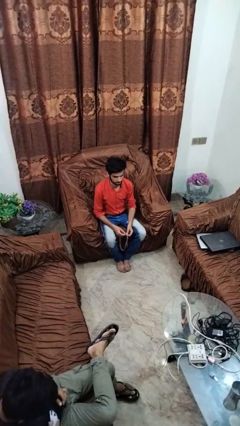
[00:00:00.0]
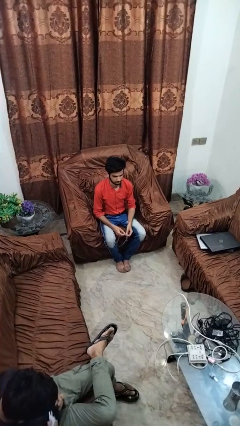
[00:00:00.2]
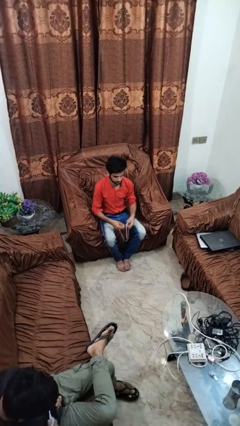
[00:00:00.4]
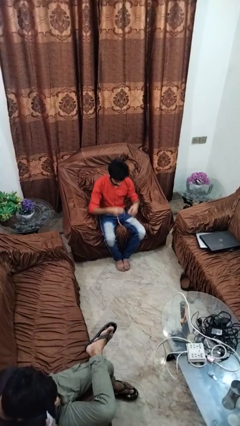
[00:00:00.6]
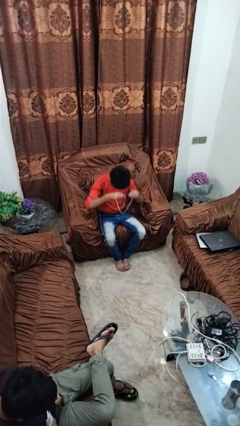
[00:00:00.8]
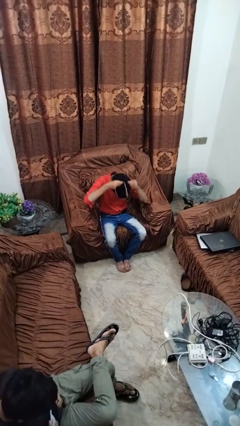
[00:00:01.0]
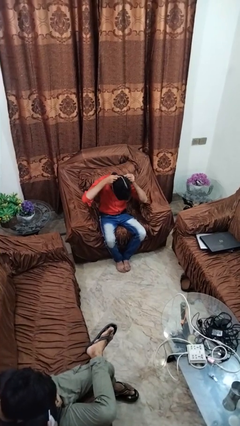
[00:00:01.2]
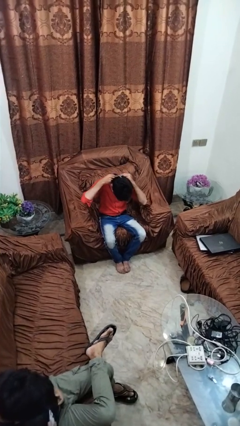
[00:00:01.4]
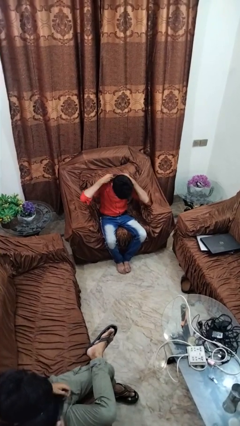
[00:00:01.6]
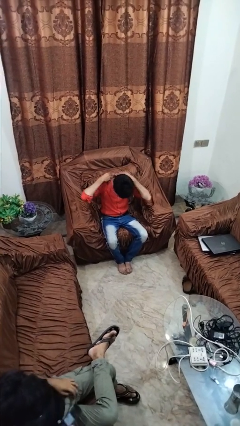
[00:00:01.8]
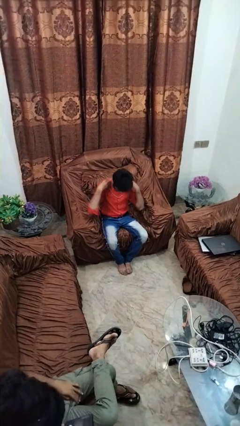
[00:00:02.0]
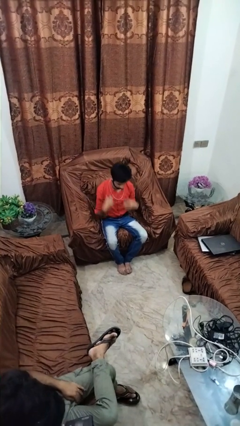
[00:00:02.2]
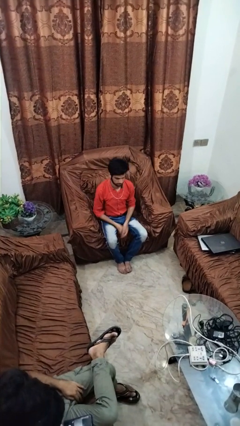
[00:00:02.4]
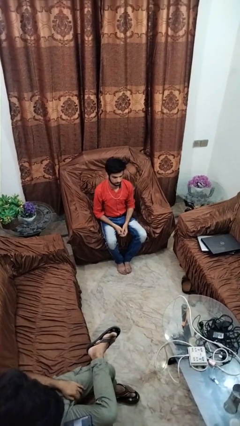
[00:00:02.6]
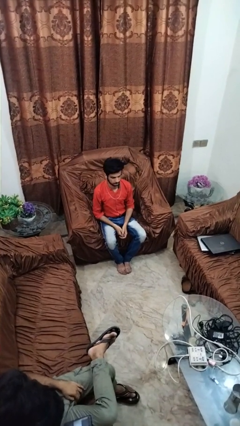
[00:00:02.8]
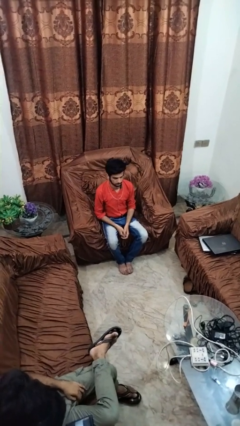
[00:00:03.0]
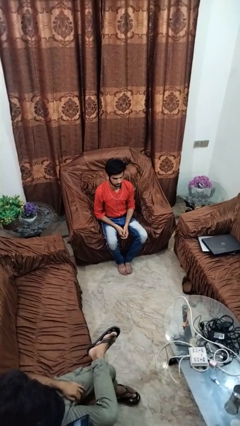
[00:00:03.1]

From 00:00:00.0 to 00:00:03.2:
person puts on necklace

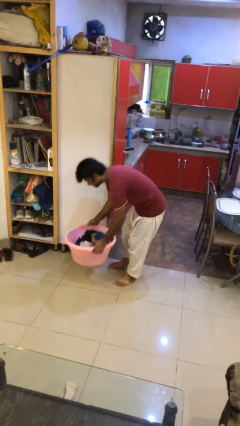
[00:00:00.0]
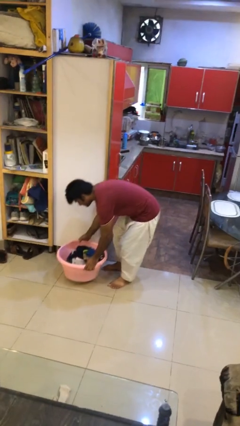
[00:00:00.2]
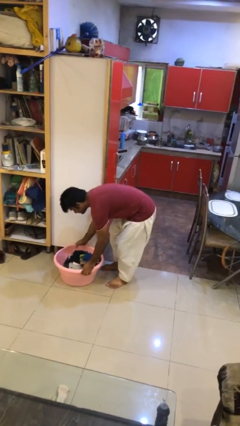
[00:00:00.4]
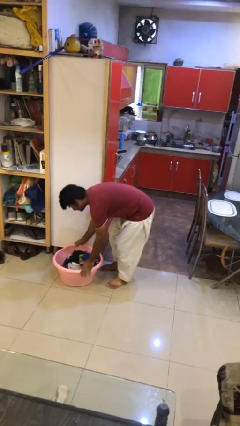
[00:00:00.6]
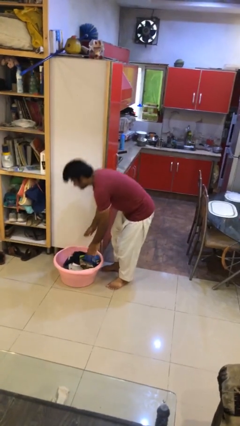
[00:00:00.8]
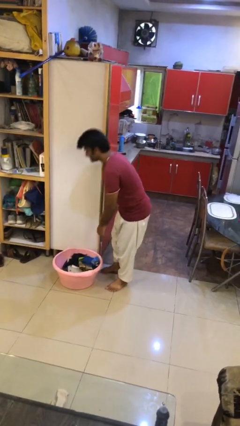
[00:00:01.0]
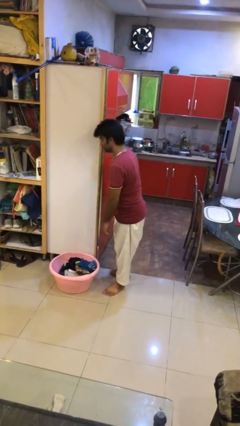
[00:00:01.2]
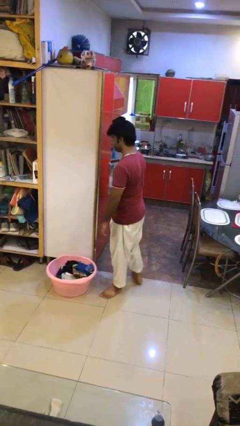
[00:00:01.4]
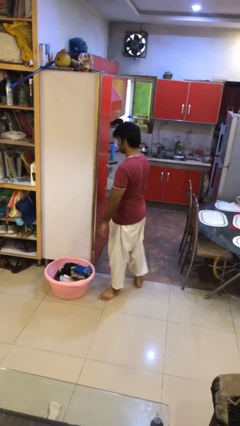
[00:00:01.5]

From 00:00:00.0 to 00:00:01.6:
person puts down object on floor

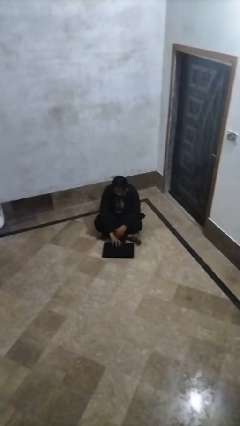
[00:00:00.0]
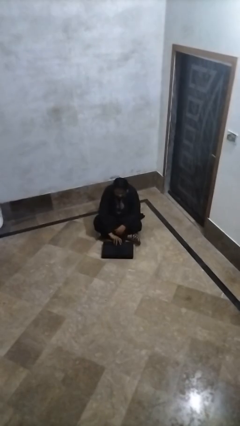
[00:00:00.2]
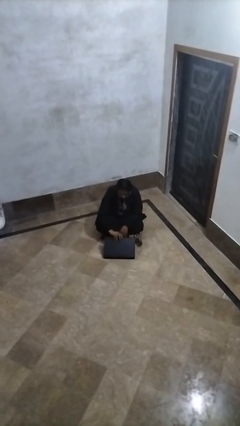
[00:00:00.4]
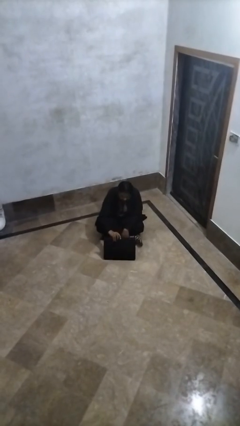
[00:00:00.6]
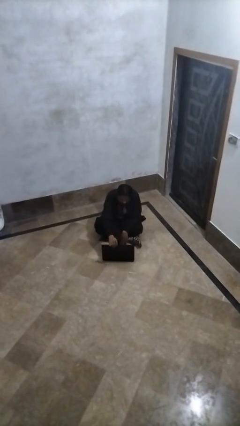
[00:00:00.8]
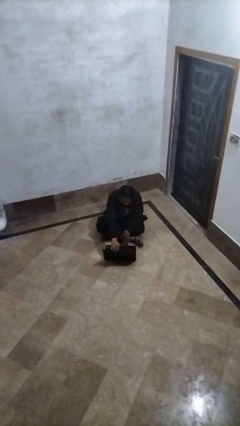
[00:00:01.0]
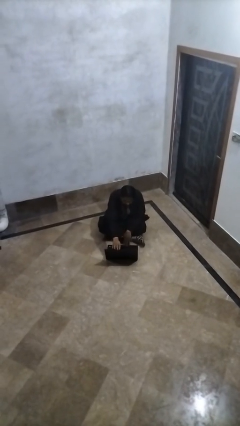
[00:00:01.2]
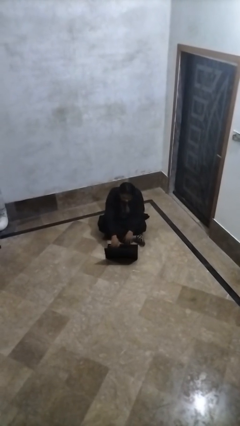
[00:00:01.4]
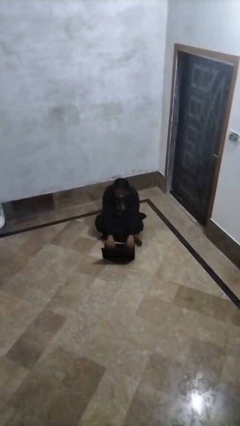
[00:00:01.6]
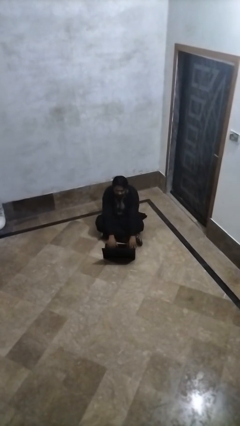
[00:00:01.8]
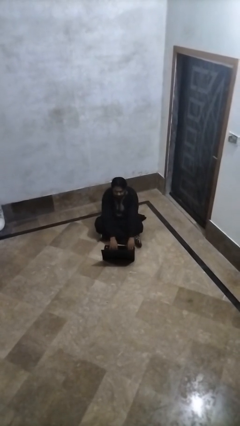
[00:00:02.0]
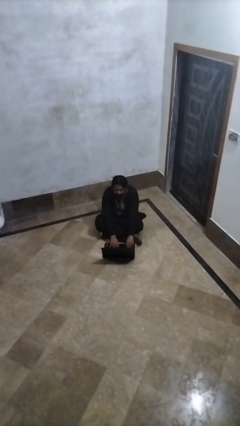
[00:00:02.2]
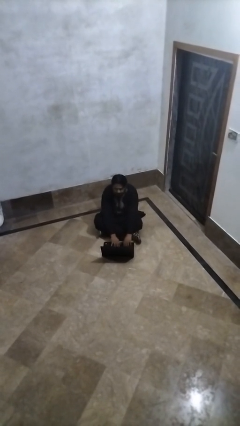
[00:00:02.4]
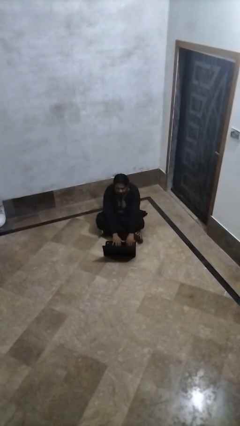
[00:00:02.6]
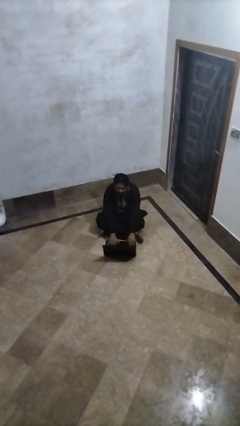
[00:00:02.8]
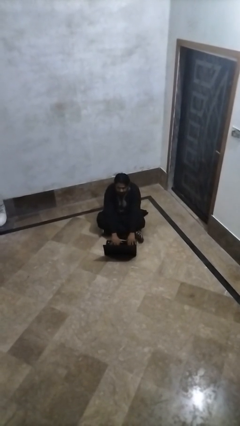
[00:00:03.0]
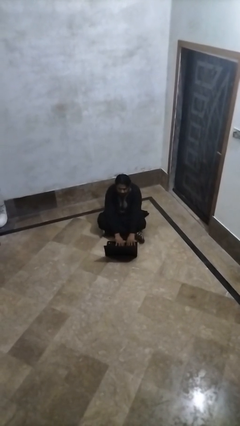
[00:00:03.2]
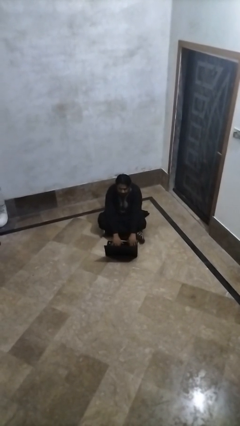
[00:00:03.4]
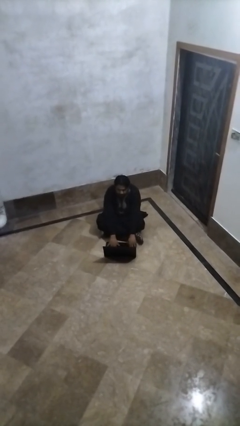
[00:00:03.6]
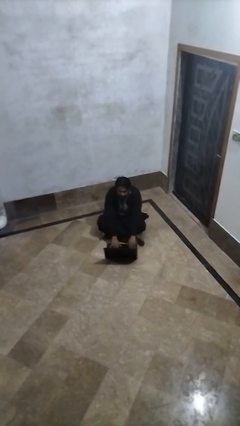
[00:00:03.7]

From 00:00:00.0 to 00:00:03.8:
person opens laptop

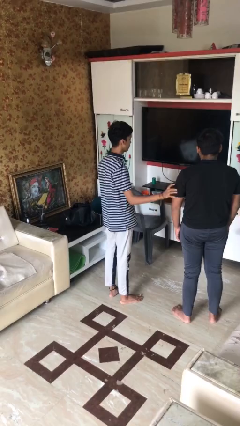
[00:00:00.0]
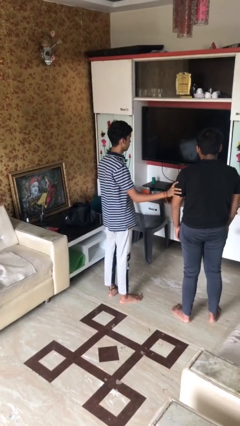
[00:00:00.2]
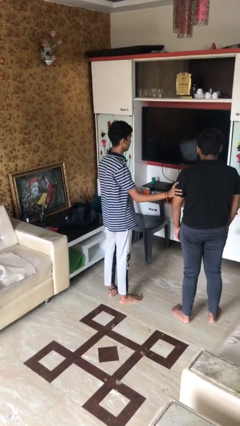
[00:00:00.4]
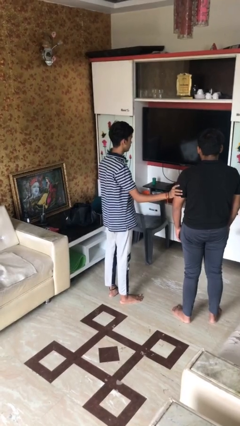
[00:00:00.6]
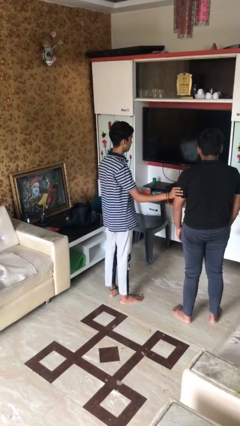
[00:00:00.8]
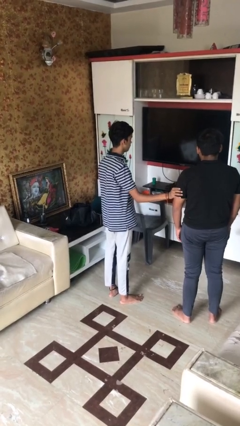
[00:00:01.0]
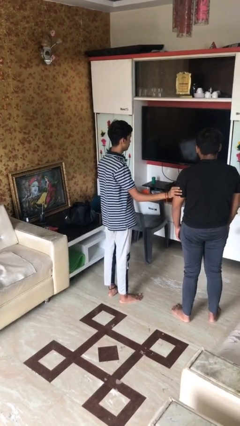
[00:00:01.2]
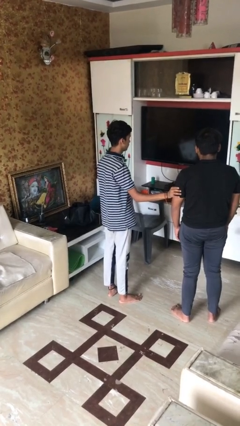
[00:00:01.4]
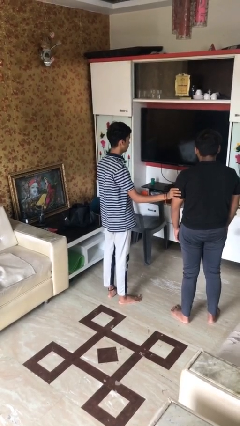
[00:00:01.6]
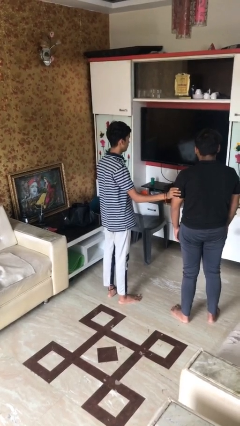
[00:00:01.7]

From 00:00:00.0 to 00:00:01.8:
person grabs person by bicep

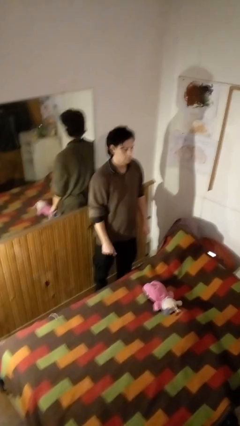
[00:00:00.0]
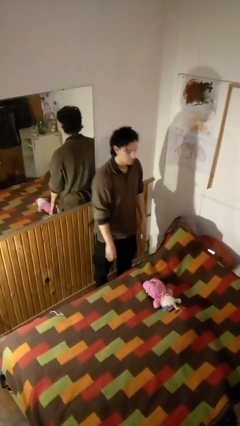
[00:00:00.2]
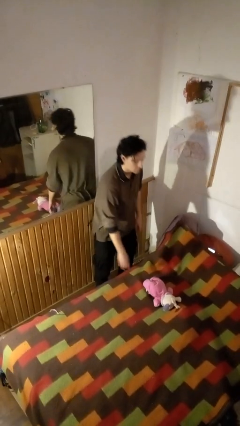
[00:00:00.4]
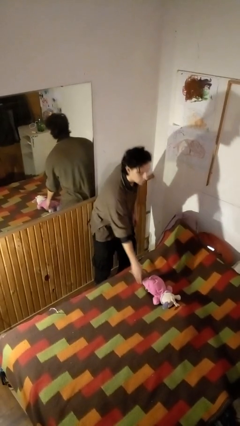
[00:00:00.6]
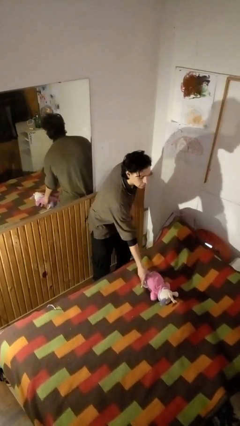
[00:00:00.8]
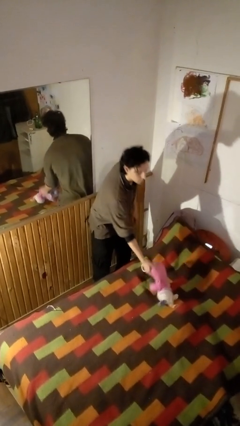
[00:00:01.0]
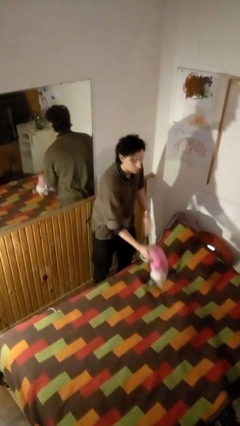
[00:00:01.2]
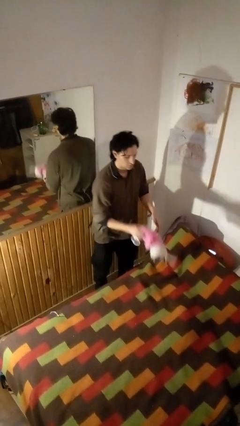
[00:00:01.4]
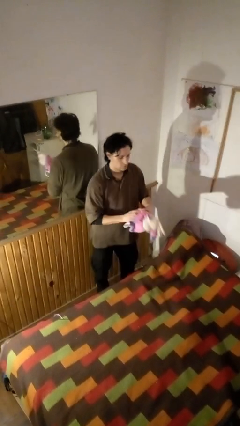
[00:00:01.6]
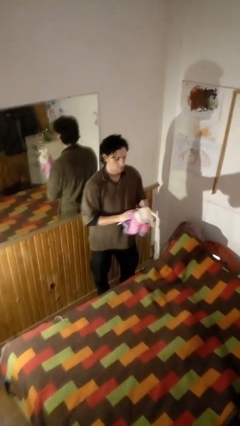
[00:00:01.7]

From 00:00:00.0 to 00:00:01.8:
person picks up object from bed

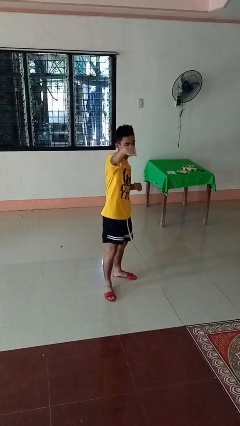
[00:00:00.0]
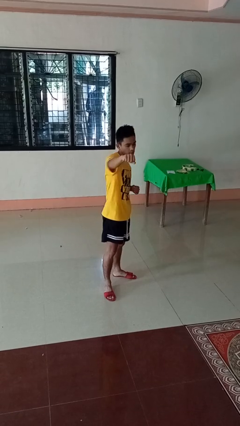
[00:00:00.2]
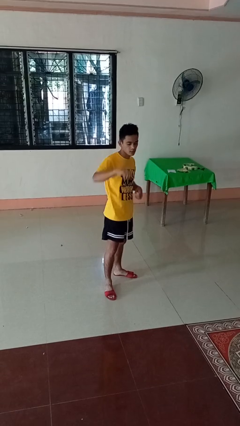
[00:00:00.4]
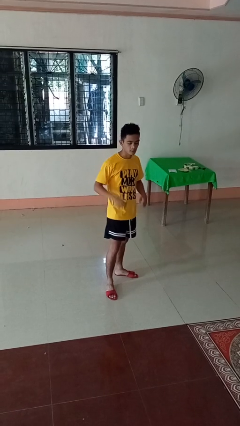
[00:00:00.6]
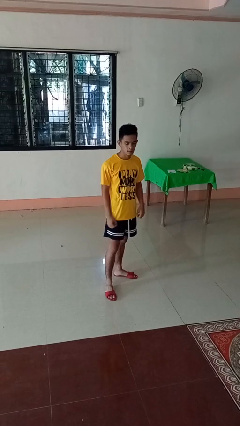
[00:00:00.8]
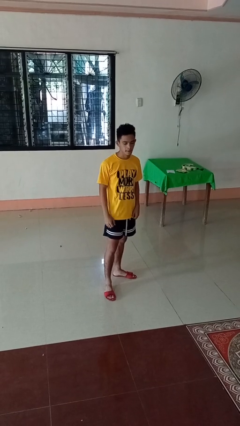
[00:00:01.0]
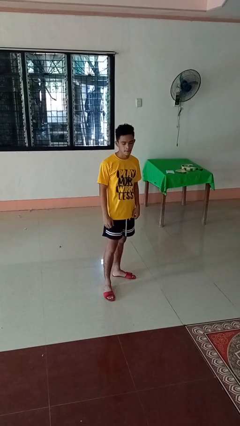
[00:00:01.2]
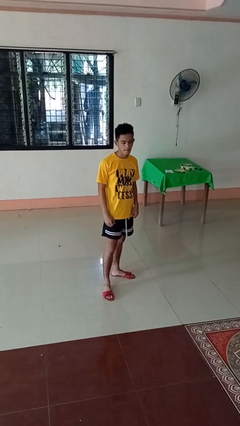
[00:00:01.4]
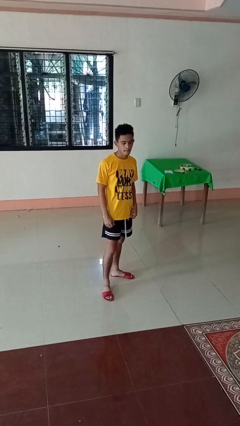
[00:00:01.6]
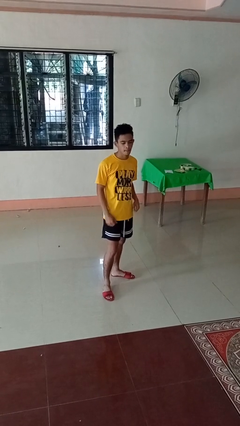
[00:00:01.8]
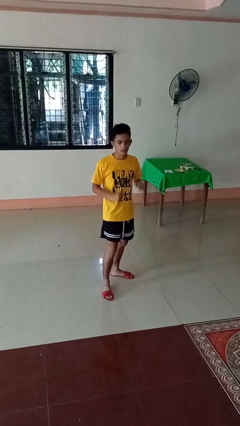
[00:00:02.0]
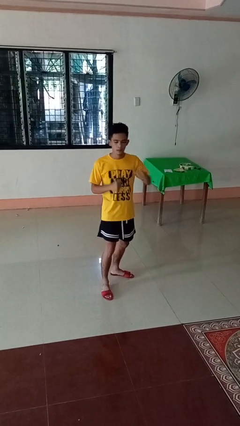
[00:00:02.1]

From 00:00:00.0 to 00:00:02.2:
person punches

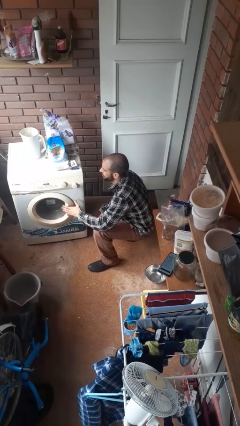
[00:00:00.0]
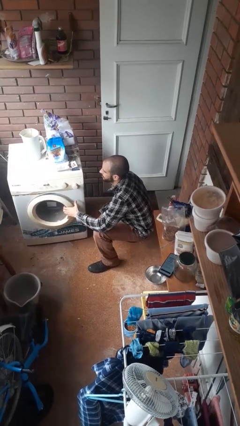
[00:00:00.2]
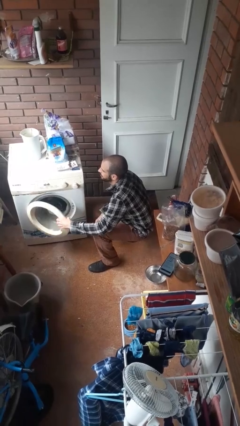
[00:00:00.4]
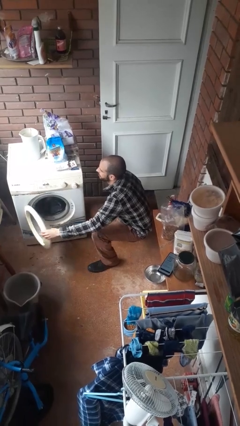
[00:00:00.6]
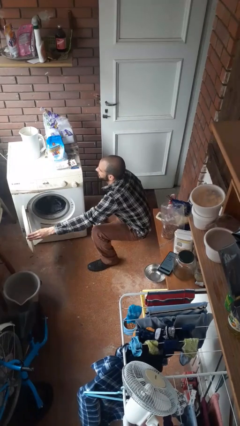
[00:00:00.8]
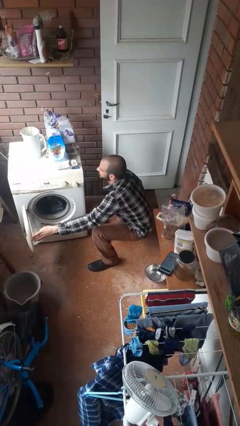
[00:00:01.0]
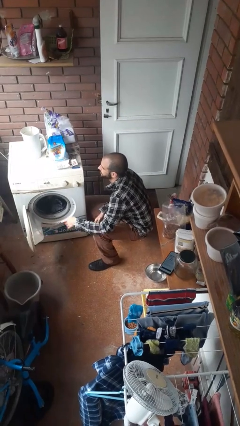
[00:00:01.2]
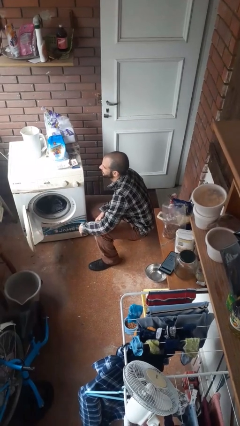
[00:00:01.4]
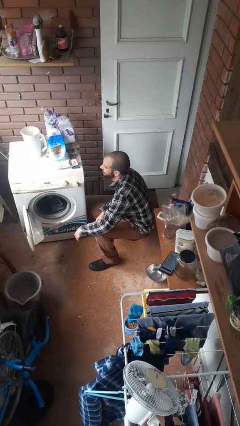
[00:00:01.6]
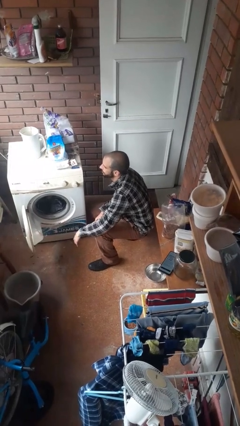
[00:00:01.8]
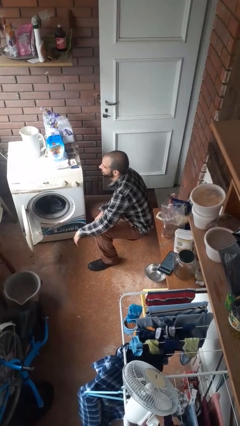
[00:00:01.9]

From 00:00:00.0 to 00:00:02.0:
person opens clothes washer

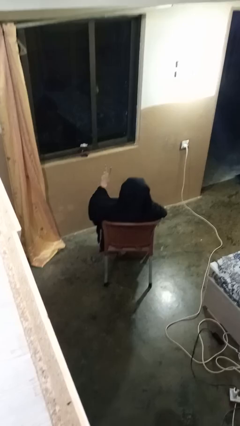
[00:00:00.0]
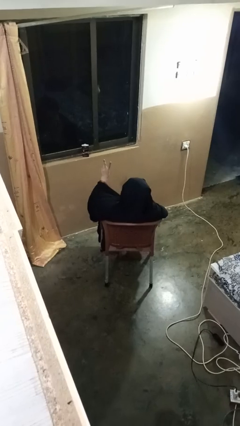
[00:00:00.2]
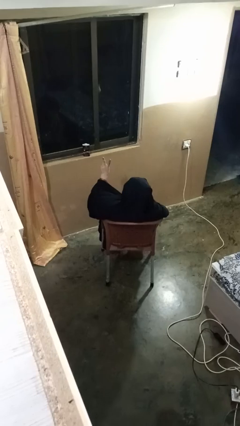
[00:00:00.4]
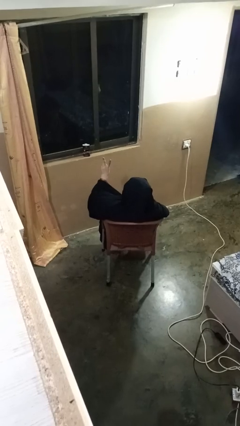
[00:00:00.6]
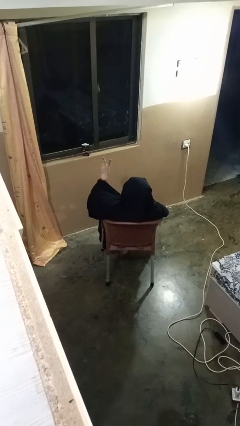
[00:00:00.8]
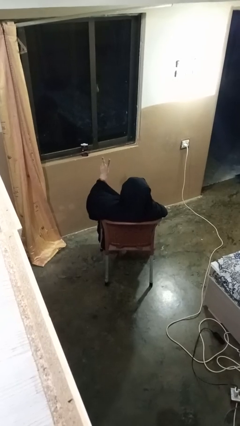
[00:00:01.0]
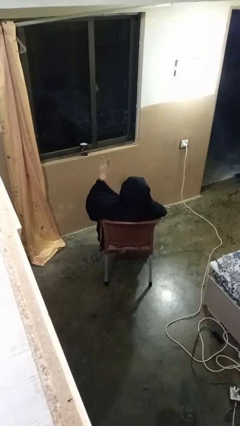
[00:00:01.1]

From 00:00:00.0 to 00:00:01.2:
person gestures peace
